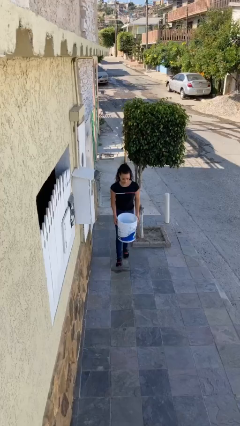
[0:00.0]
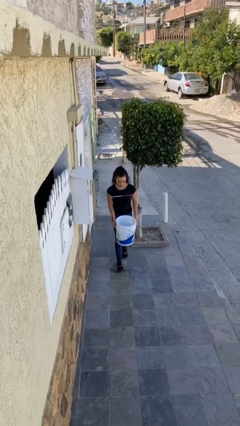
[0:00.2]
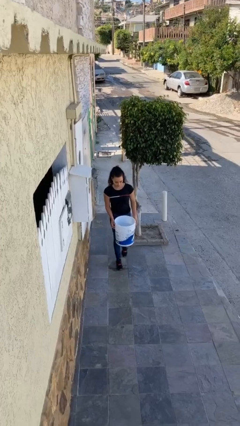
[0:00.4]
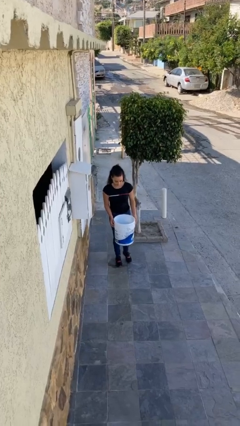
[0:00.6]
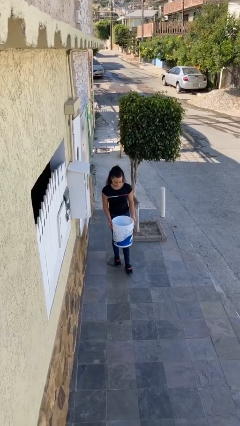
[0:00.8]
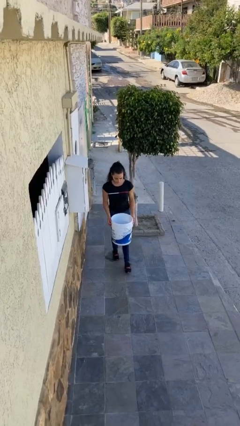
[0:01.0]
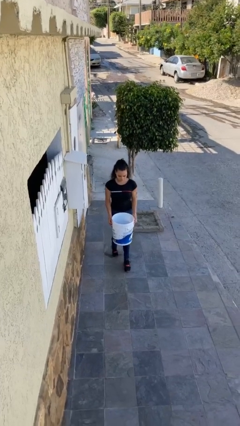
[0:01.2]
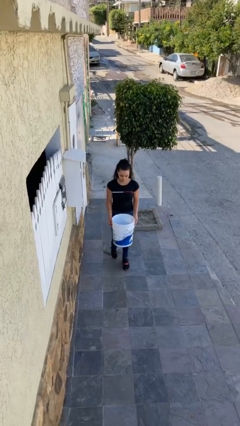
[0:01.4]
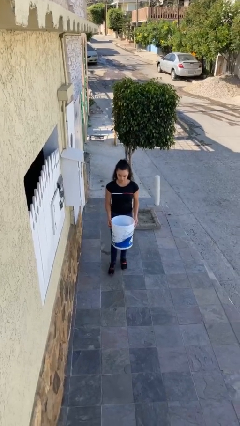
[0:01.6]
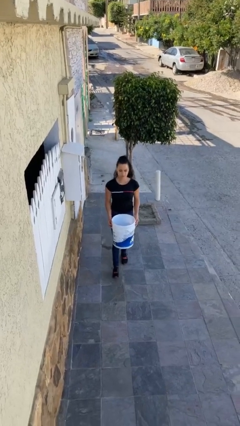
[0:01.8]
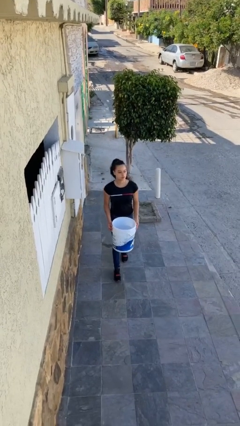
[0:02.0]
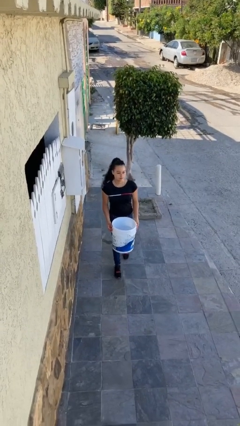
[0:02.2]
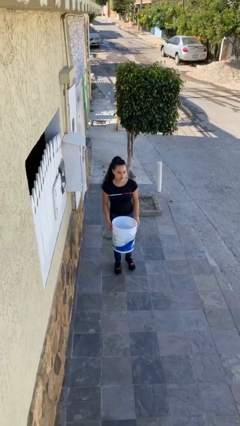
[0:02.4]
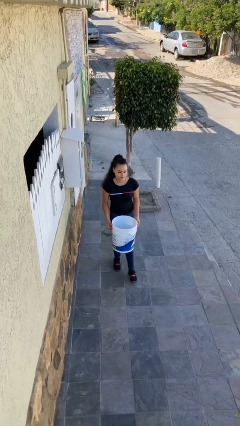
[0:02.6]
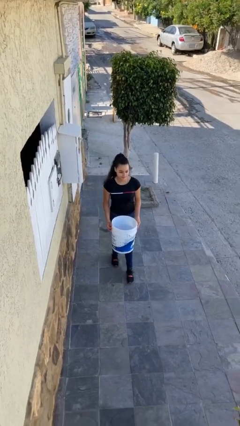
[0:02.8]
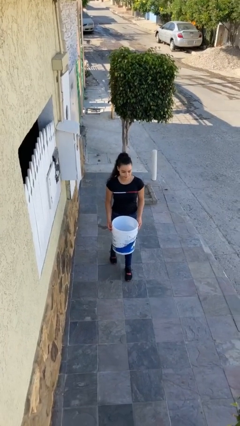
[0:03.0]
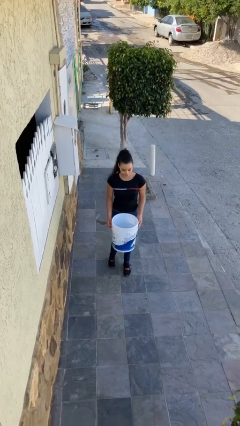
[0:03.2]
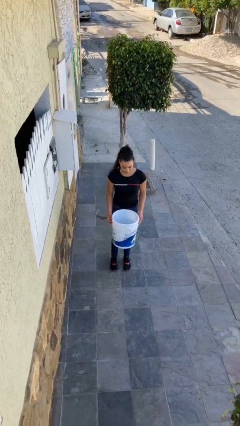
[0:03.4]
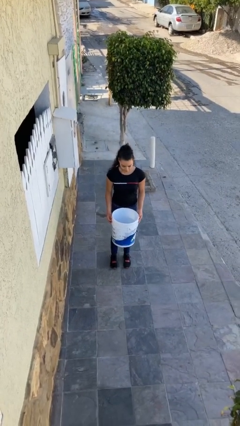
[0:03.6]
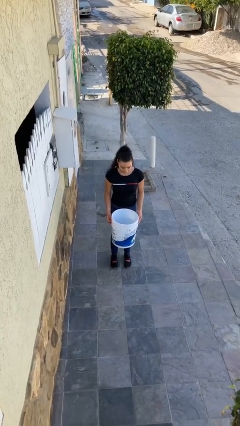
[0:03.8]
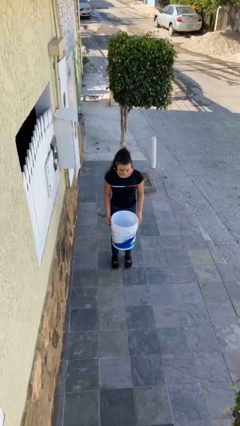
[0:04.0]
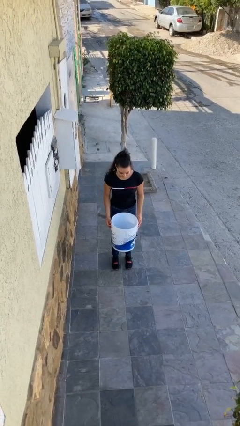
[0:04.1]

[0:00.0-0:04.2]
person carries heavy object

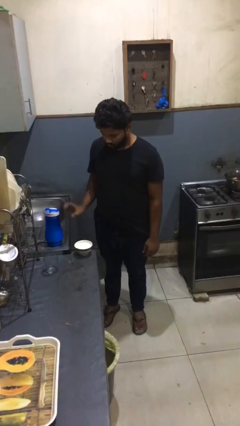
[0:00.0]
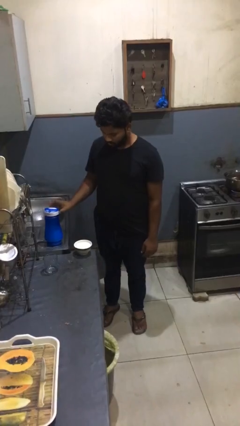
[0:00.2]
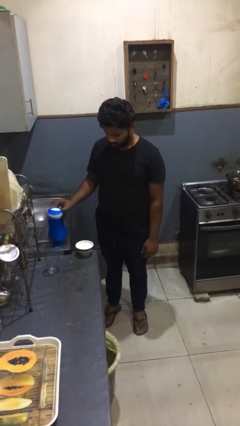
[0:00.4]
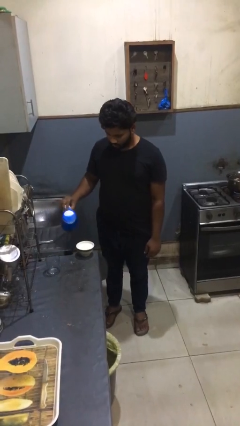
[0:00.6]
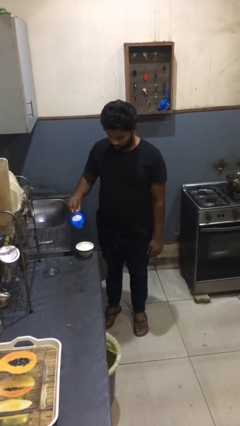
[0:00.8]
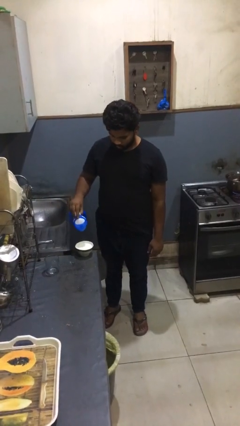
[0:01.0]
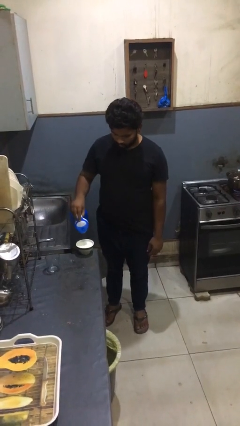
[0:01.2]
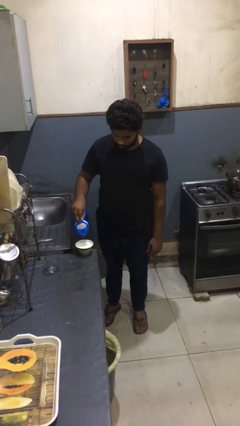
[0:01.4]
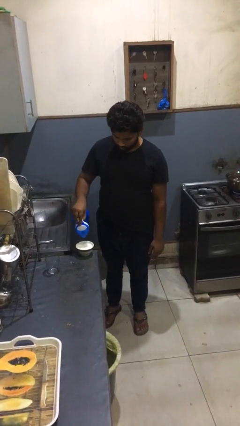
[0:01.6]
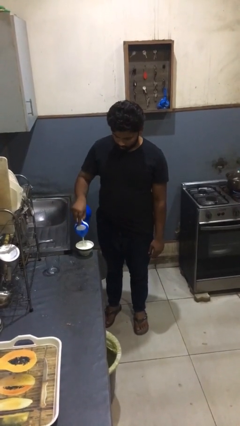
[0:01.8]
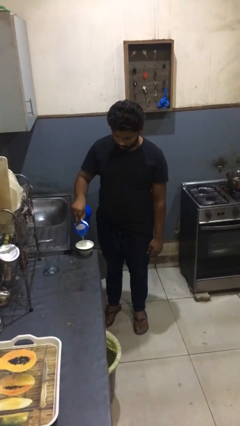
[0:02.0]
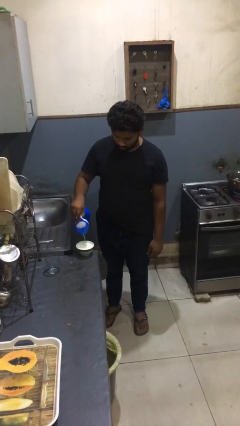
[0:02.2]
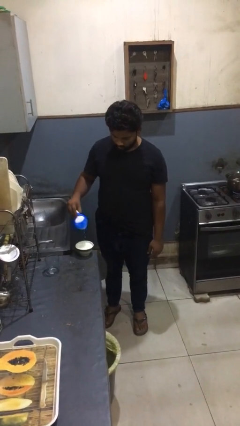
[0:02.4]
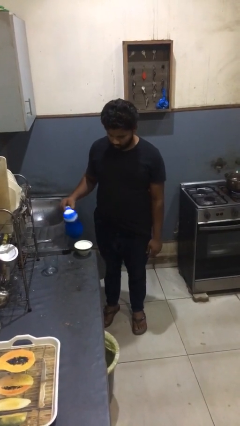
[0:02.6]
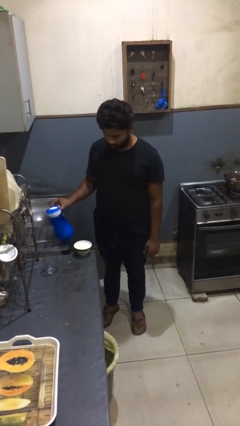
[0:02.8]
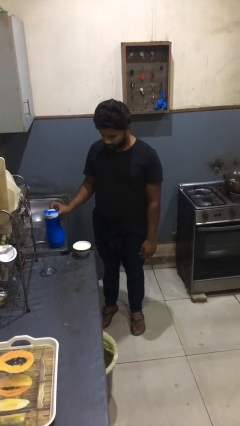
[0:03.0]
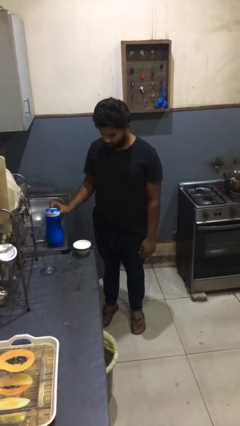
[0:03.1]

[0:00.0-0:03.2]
person pours into bowl

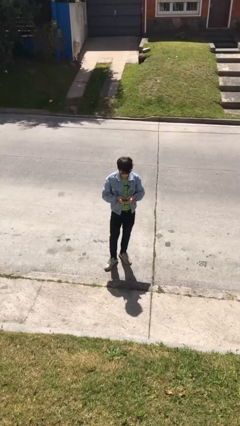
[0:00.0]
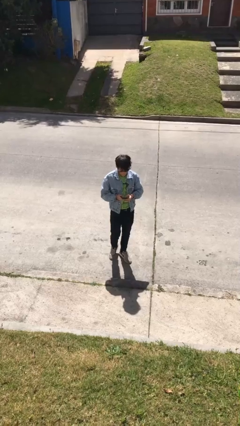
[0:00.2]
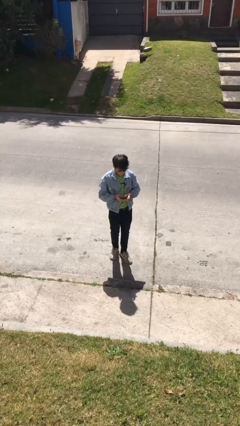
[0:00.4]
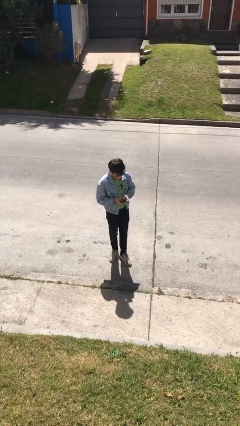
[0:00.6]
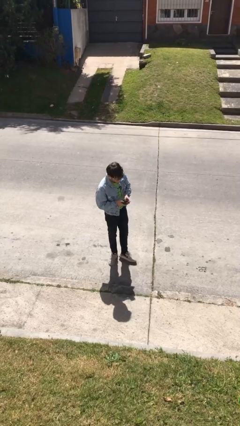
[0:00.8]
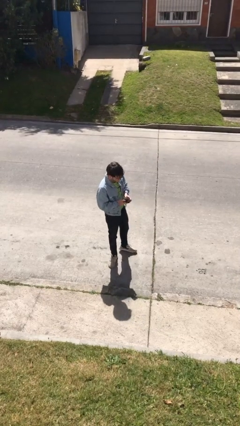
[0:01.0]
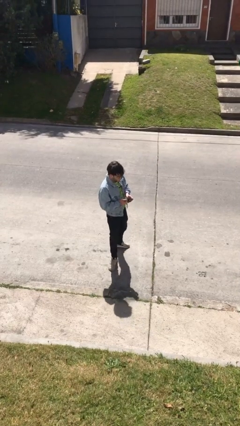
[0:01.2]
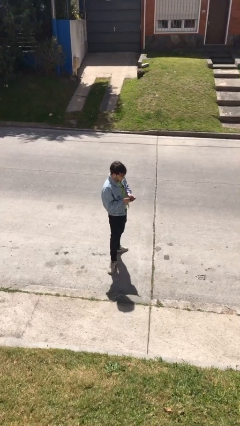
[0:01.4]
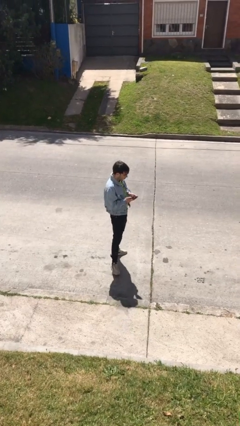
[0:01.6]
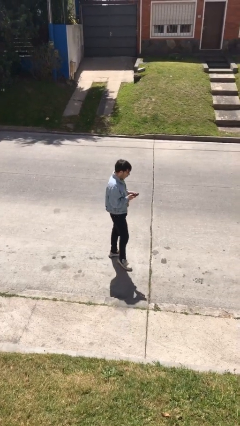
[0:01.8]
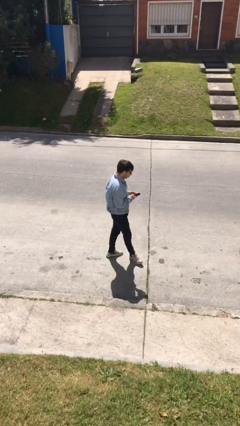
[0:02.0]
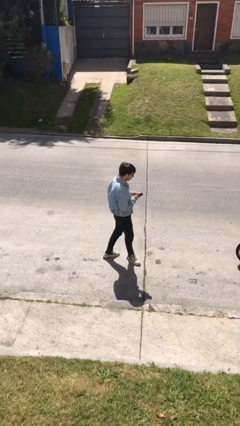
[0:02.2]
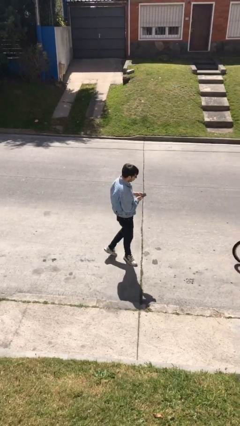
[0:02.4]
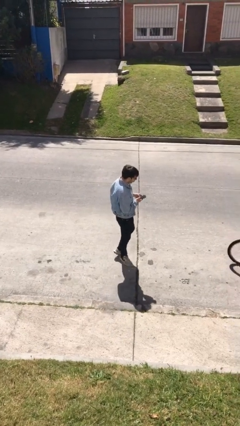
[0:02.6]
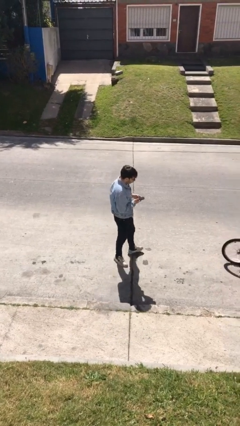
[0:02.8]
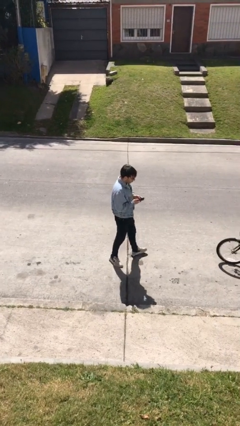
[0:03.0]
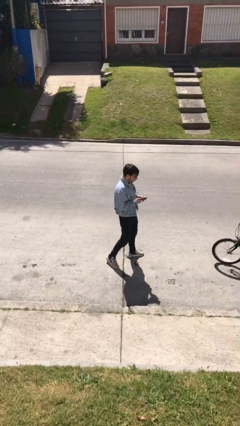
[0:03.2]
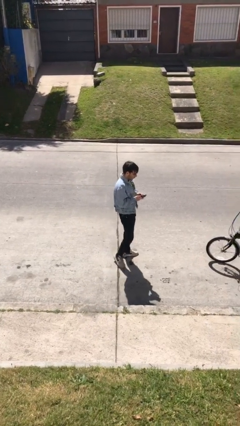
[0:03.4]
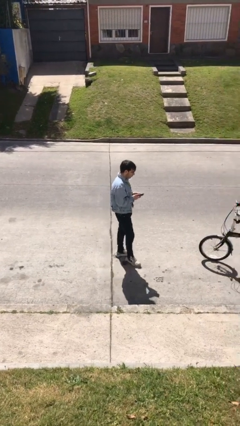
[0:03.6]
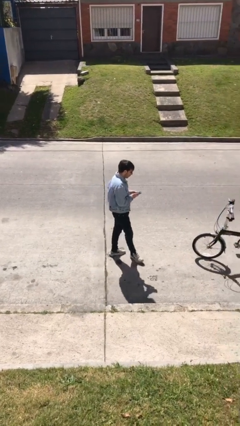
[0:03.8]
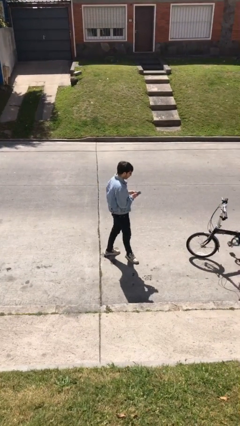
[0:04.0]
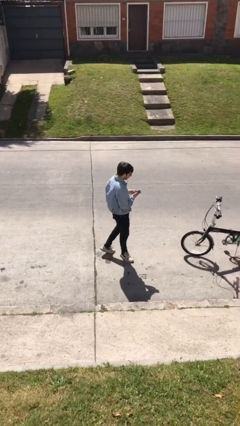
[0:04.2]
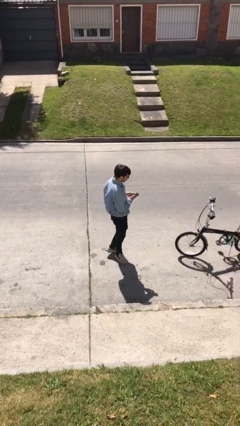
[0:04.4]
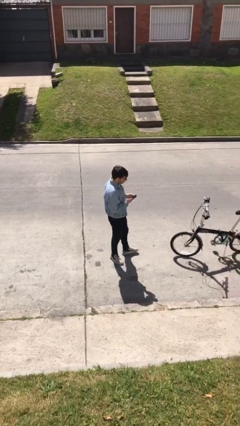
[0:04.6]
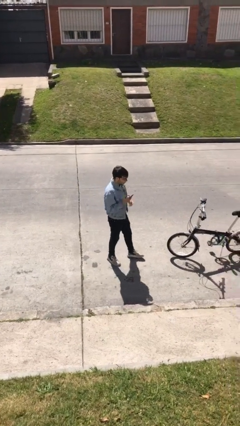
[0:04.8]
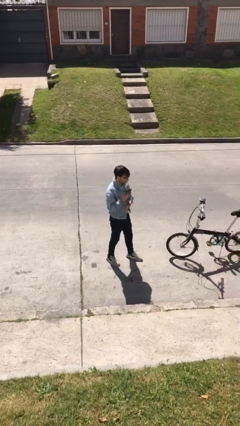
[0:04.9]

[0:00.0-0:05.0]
person texts on phone

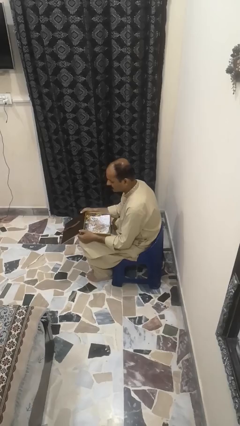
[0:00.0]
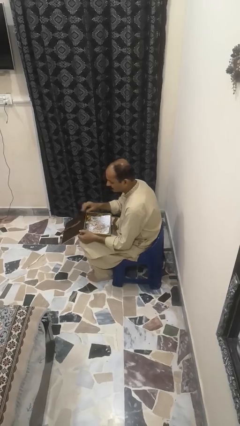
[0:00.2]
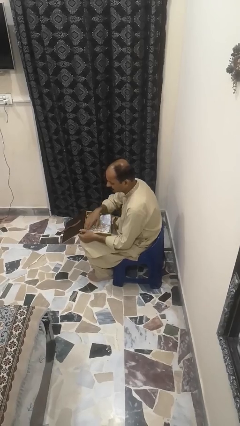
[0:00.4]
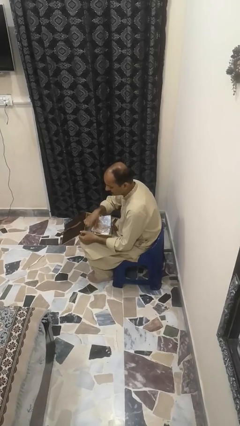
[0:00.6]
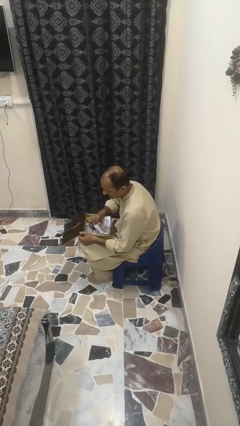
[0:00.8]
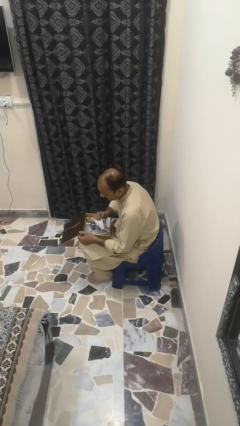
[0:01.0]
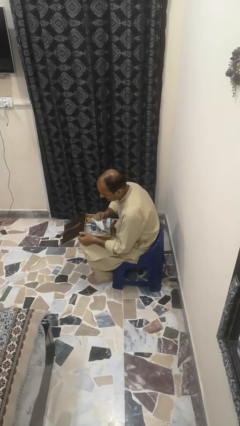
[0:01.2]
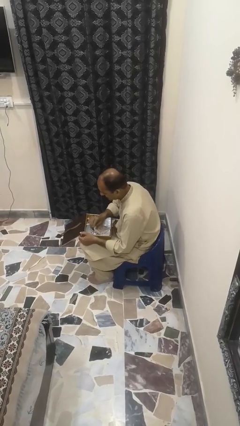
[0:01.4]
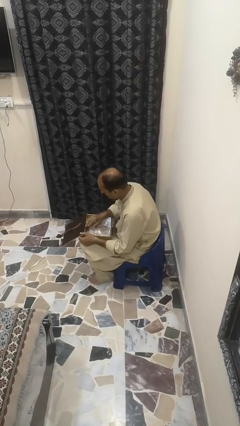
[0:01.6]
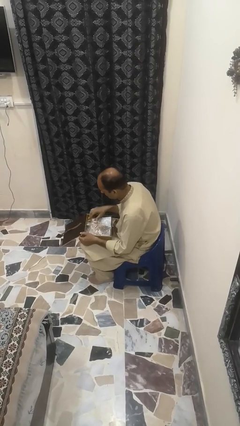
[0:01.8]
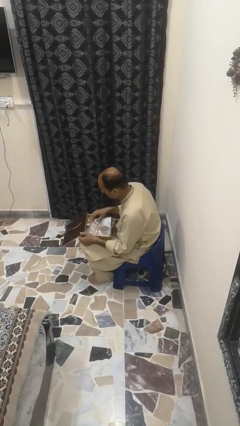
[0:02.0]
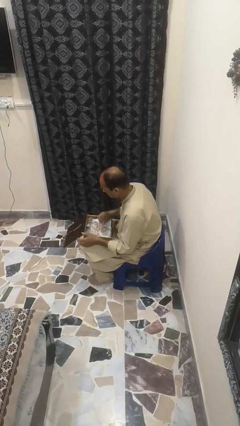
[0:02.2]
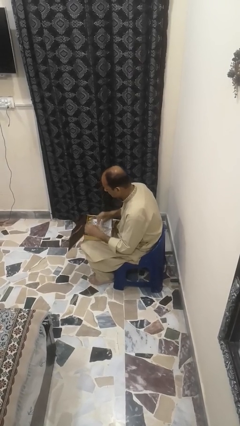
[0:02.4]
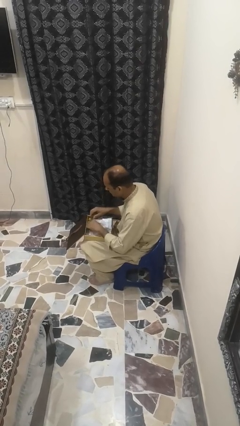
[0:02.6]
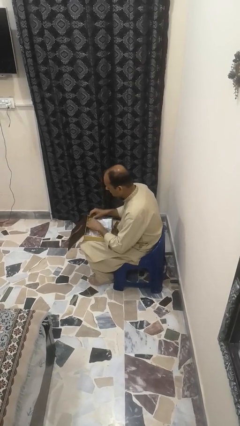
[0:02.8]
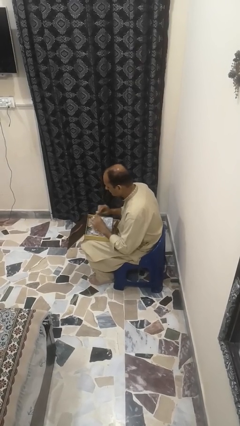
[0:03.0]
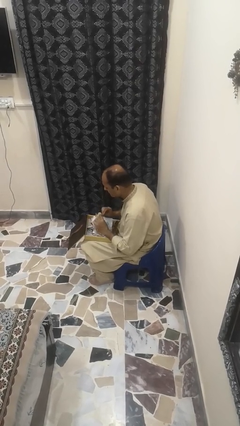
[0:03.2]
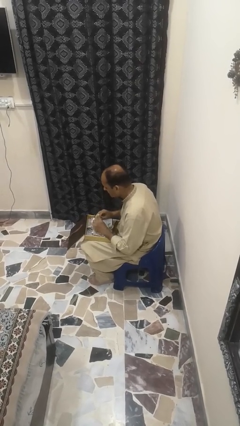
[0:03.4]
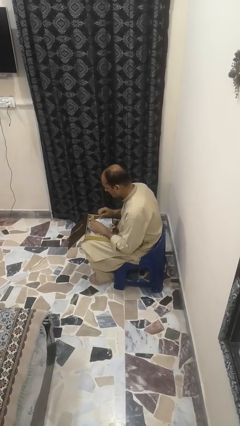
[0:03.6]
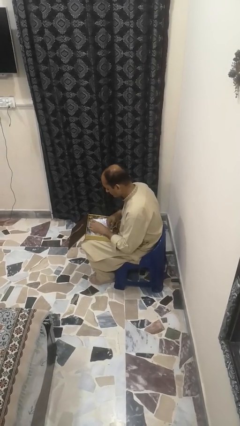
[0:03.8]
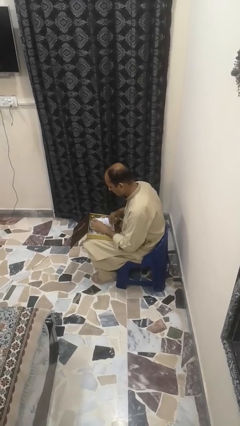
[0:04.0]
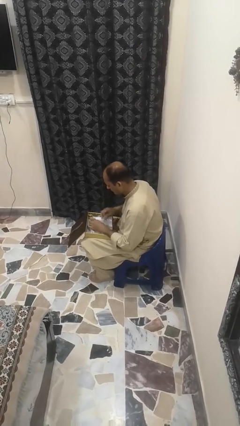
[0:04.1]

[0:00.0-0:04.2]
person searches jewelry box

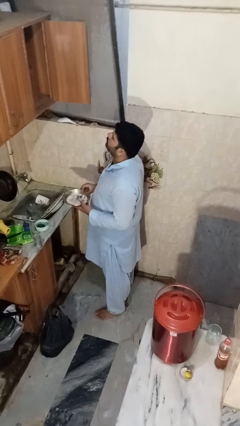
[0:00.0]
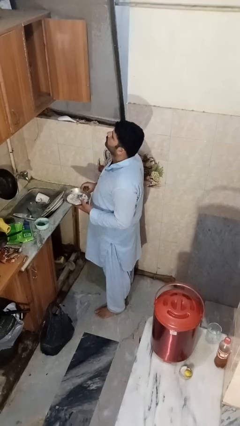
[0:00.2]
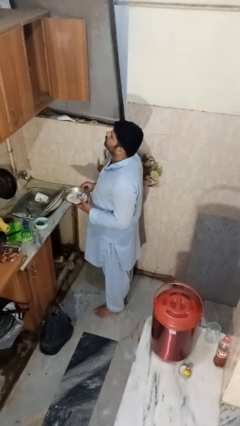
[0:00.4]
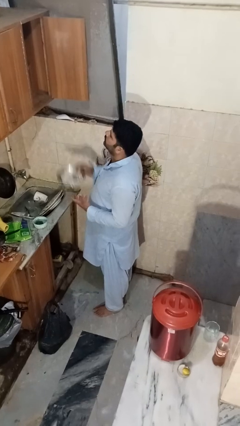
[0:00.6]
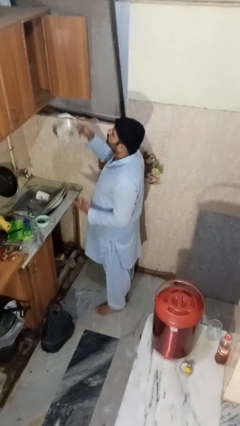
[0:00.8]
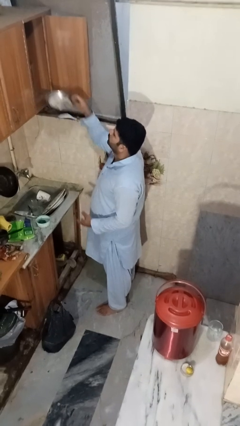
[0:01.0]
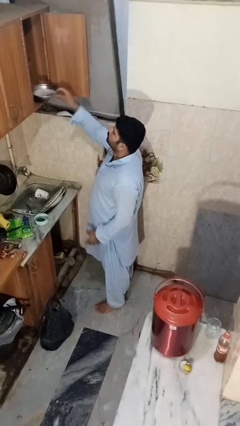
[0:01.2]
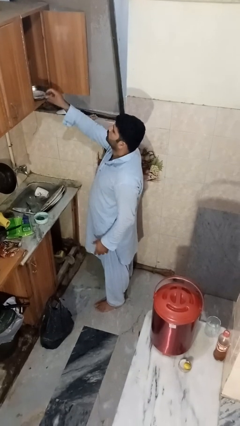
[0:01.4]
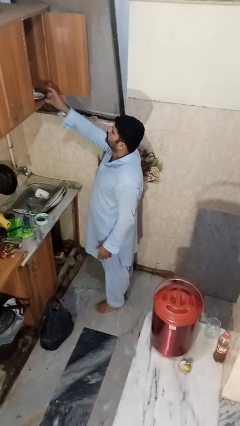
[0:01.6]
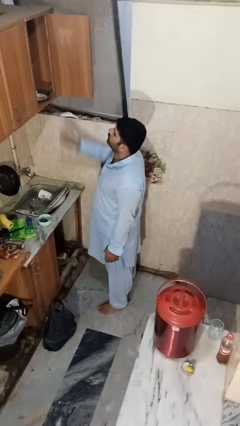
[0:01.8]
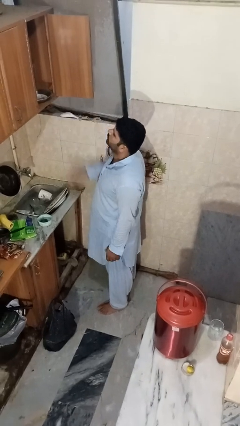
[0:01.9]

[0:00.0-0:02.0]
person puts object in cabinet
